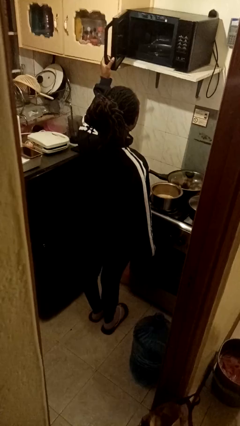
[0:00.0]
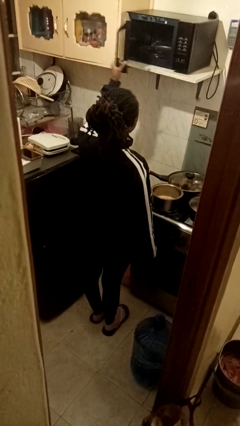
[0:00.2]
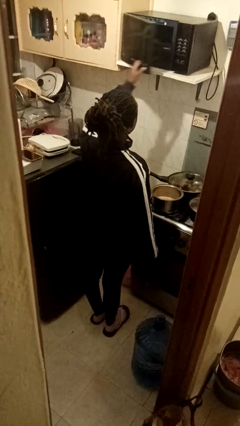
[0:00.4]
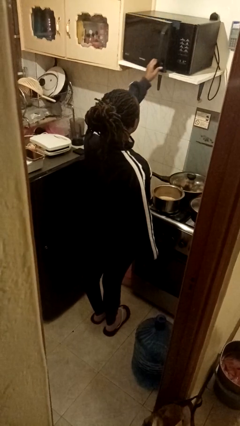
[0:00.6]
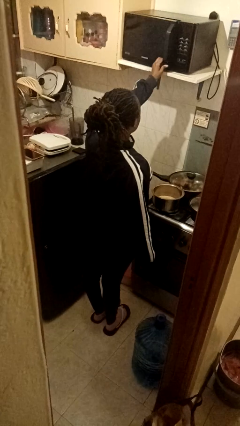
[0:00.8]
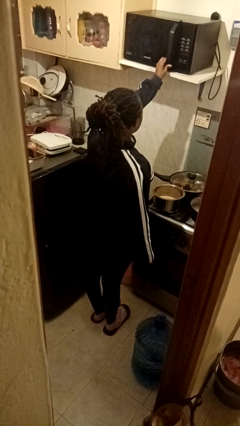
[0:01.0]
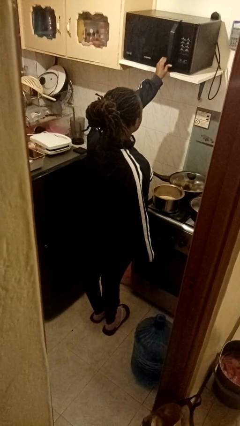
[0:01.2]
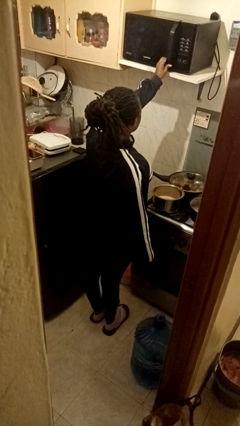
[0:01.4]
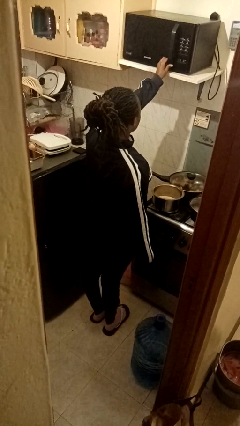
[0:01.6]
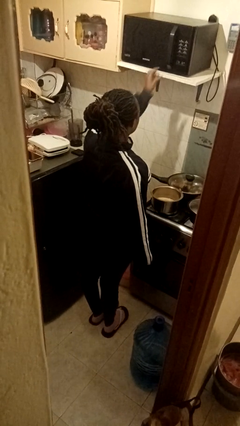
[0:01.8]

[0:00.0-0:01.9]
person closes microwave

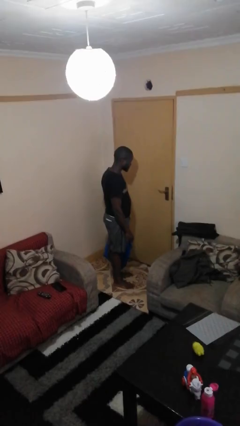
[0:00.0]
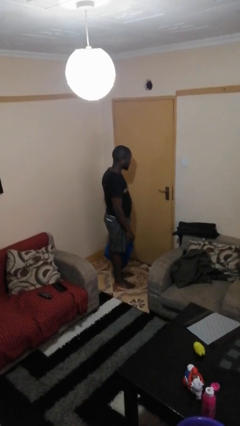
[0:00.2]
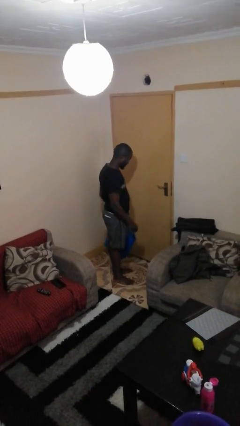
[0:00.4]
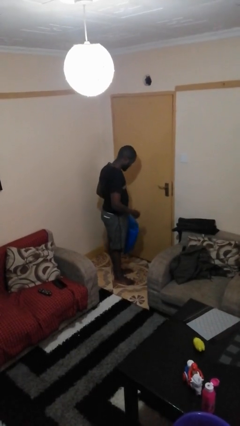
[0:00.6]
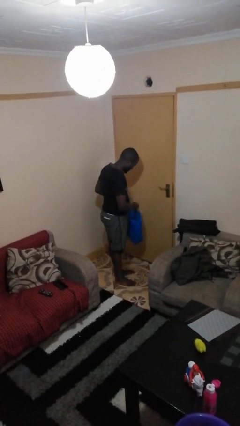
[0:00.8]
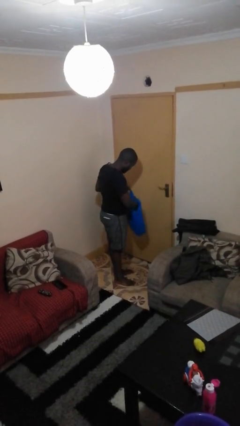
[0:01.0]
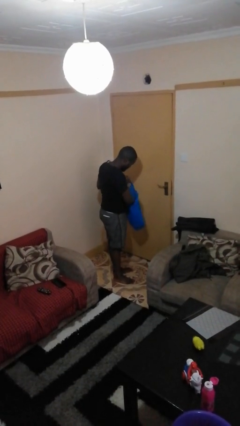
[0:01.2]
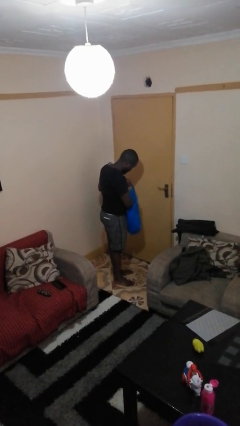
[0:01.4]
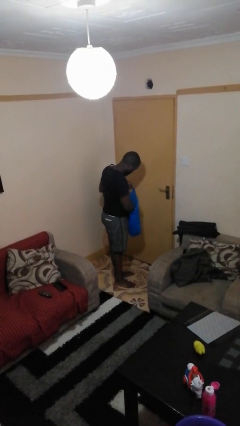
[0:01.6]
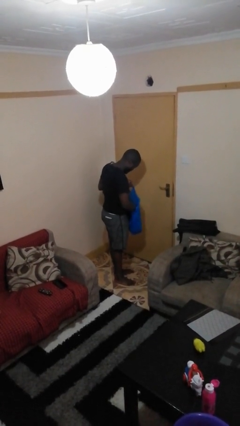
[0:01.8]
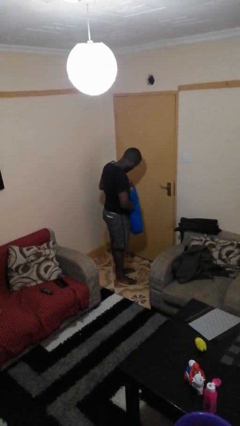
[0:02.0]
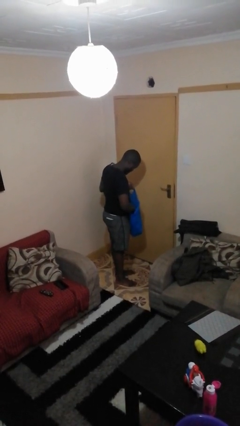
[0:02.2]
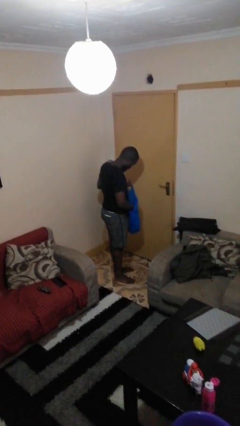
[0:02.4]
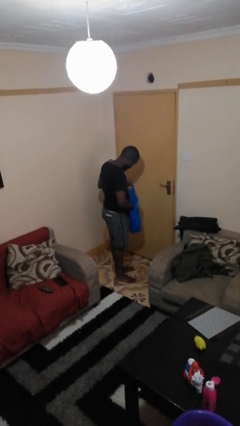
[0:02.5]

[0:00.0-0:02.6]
person searches in bag

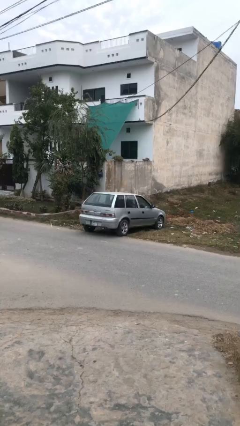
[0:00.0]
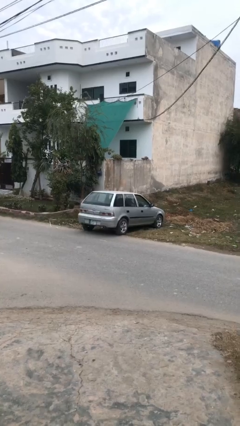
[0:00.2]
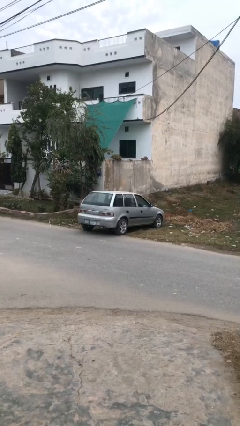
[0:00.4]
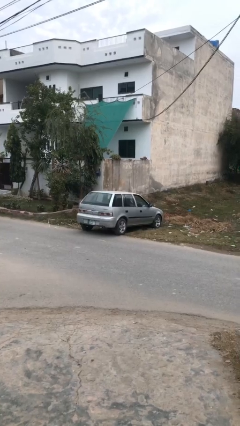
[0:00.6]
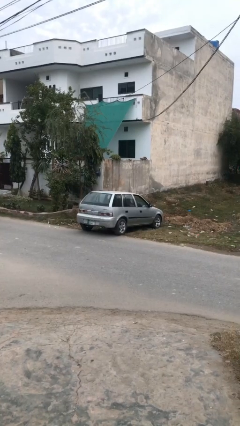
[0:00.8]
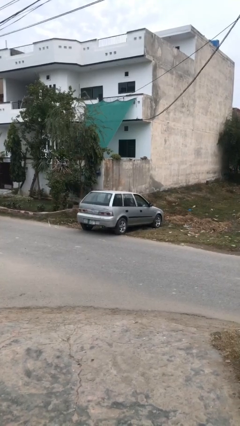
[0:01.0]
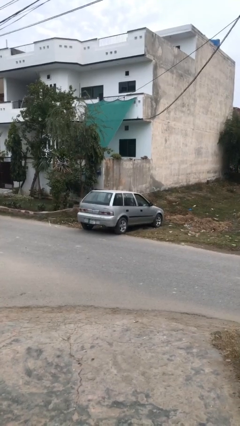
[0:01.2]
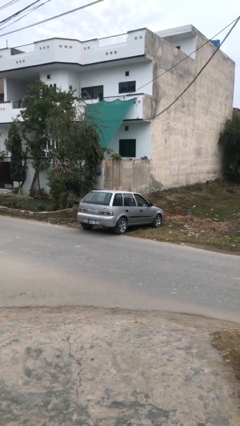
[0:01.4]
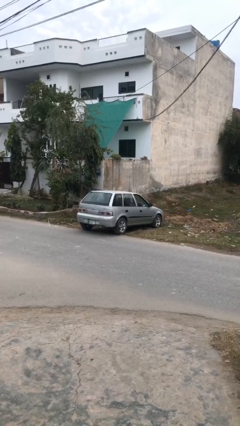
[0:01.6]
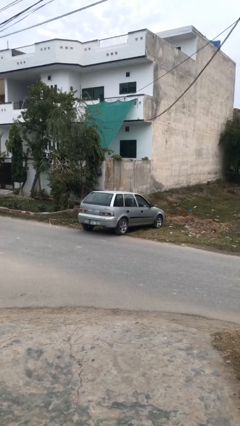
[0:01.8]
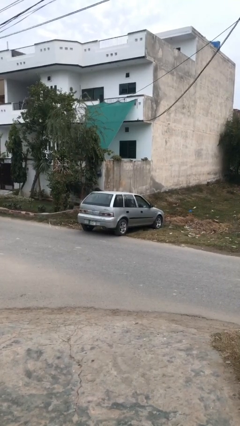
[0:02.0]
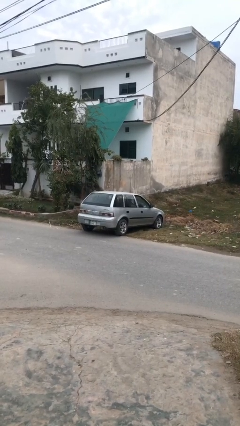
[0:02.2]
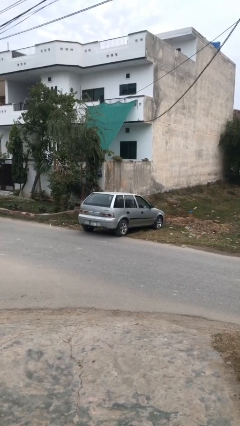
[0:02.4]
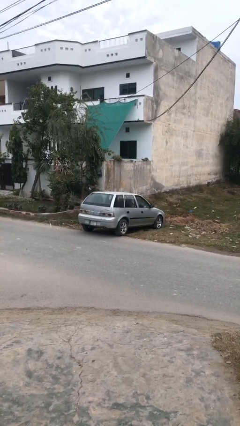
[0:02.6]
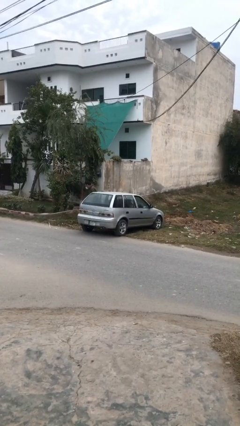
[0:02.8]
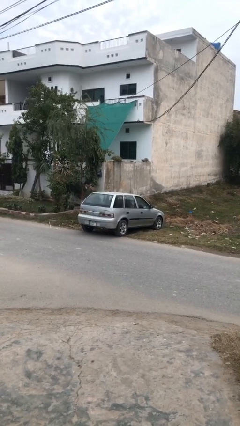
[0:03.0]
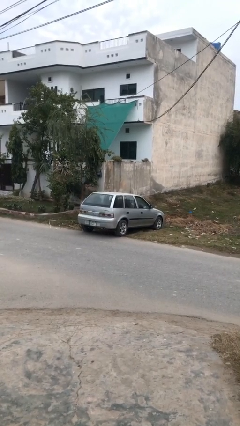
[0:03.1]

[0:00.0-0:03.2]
car drops off person

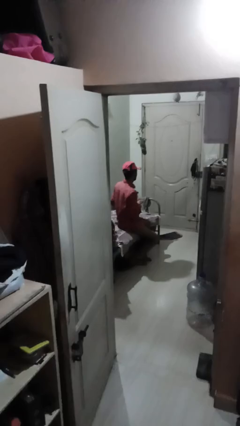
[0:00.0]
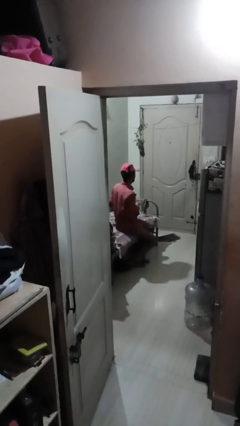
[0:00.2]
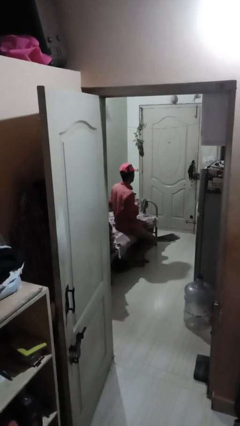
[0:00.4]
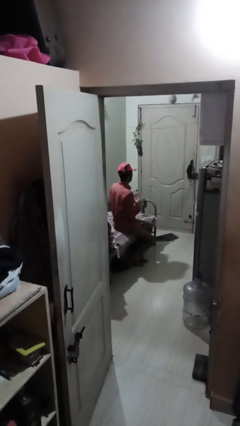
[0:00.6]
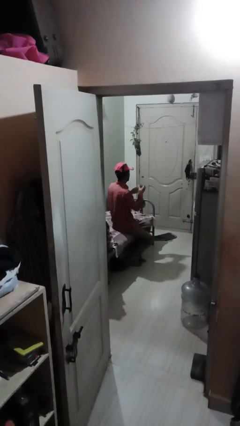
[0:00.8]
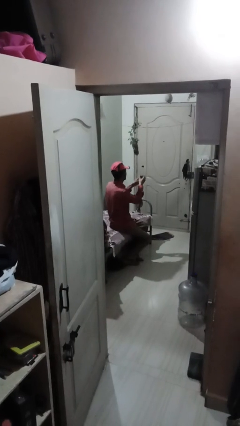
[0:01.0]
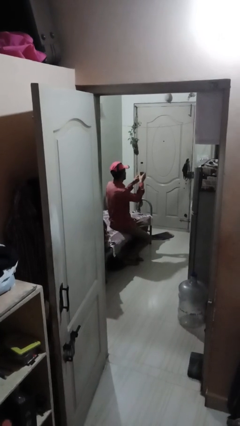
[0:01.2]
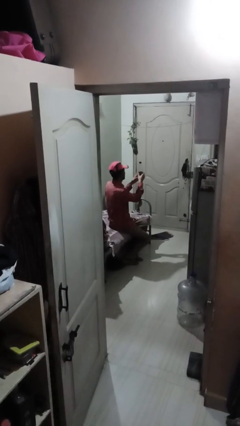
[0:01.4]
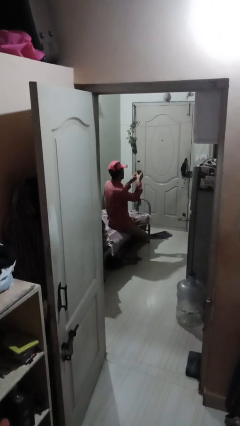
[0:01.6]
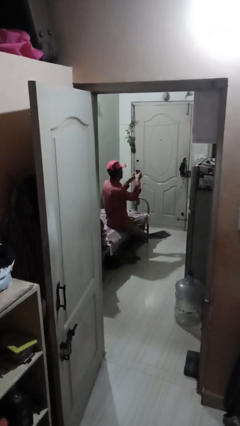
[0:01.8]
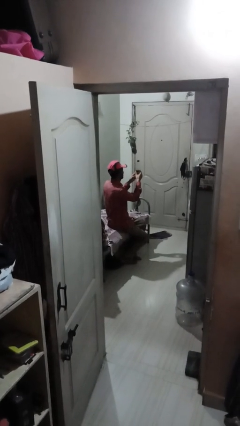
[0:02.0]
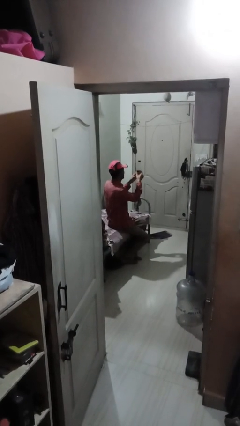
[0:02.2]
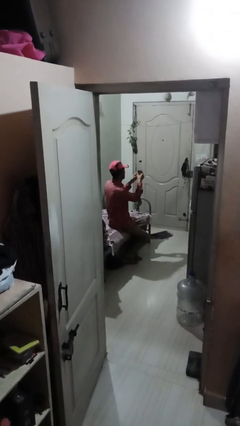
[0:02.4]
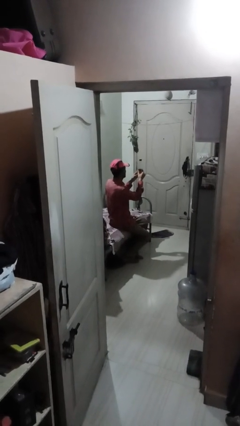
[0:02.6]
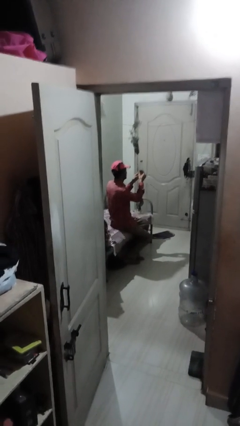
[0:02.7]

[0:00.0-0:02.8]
person squeezes object

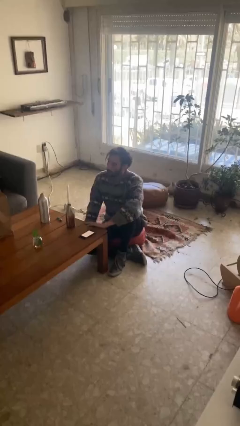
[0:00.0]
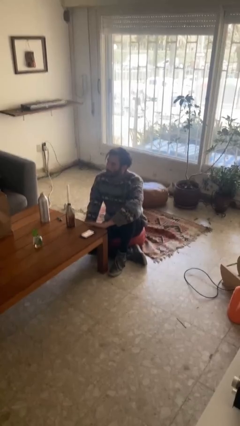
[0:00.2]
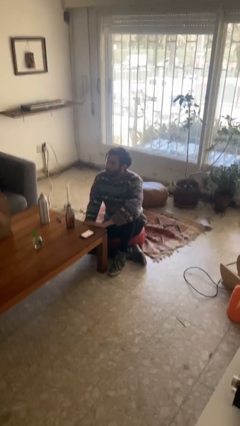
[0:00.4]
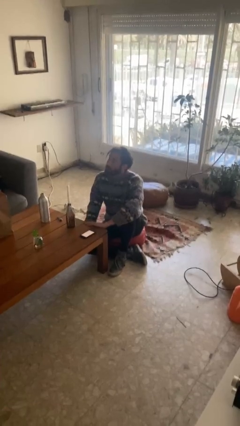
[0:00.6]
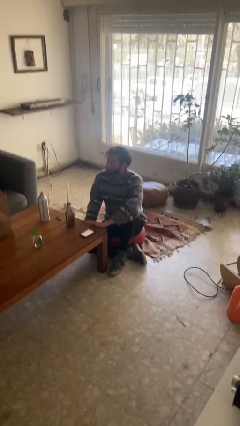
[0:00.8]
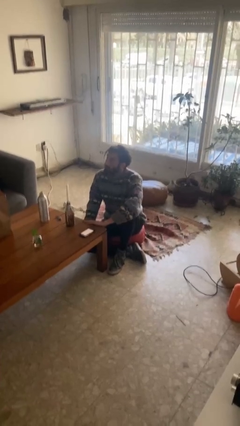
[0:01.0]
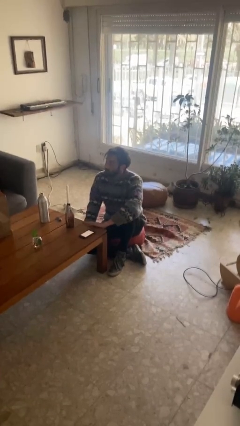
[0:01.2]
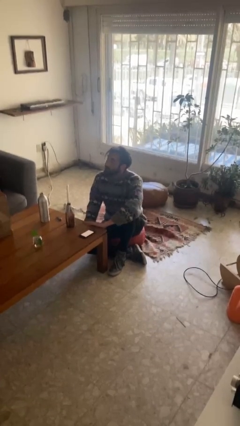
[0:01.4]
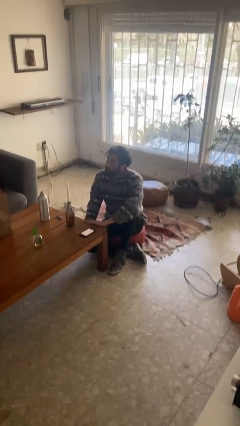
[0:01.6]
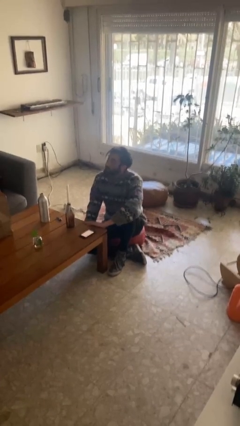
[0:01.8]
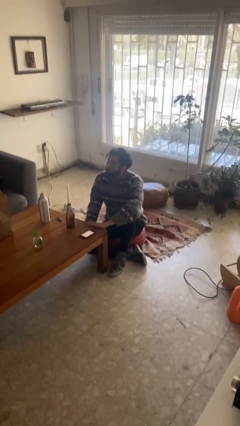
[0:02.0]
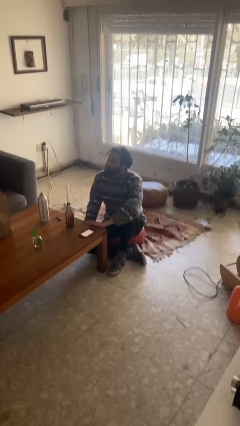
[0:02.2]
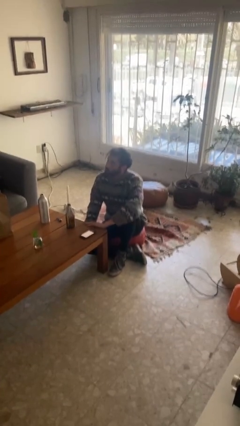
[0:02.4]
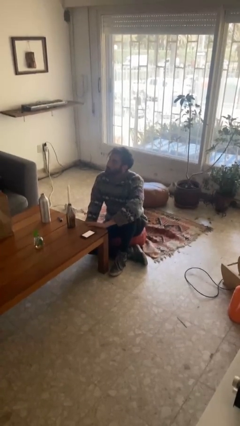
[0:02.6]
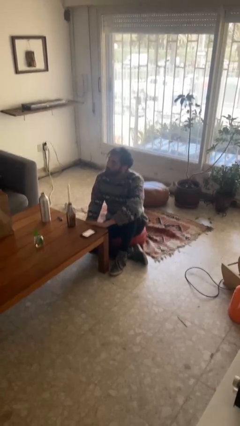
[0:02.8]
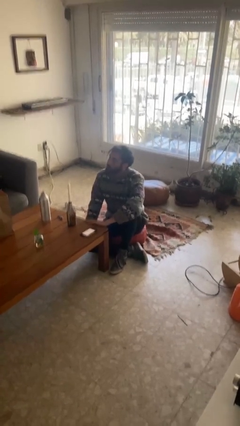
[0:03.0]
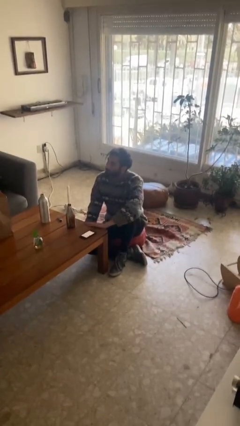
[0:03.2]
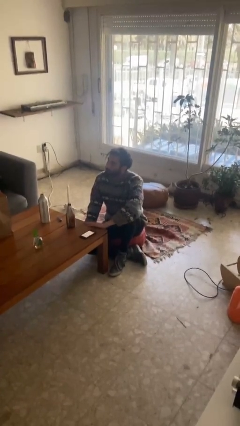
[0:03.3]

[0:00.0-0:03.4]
person nods head

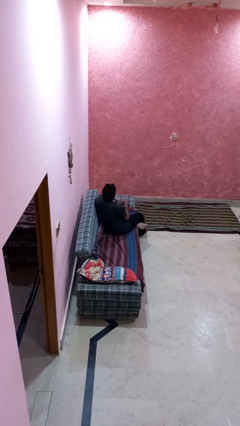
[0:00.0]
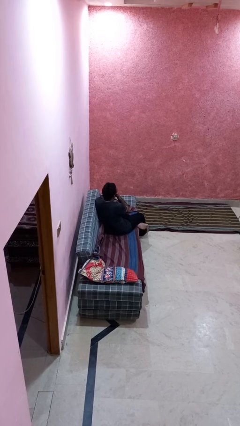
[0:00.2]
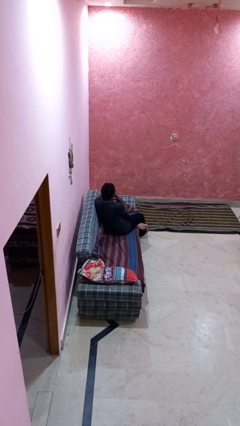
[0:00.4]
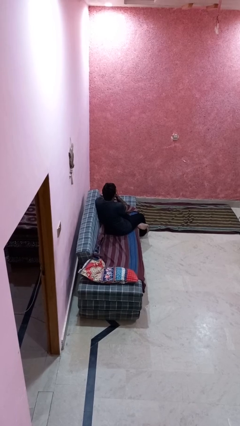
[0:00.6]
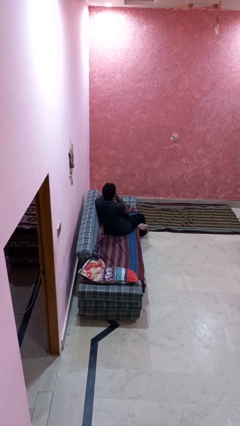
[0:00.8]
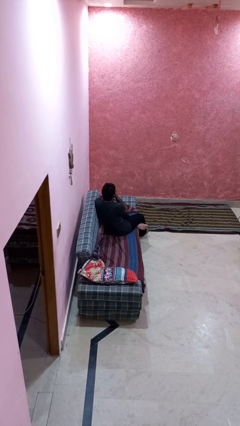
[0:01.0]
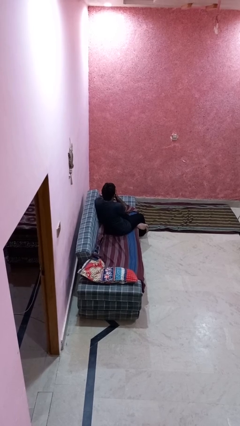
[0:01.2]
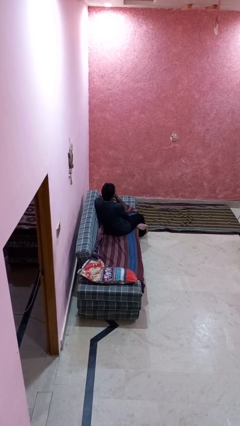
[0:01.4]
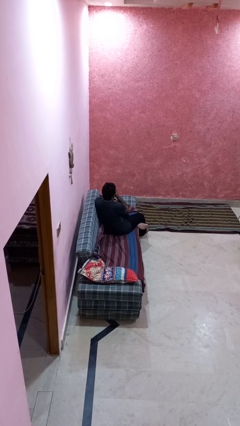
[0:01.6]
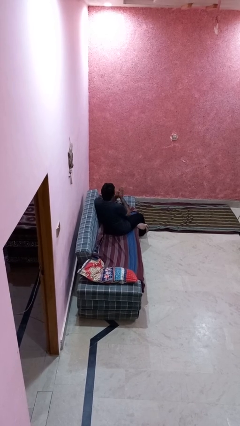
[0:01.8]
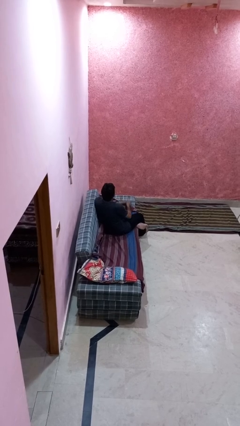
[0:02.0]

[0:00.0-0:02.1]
person covers face with hands

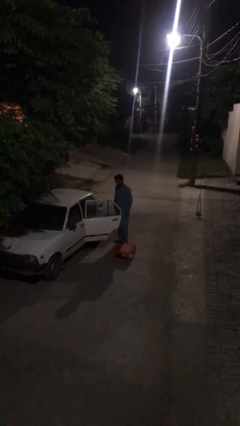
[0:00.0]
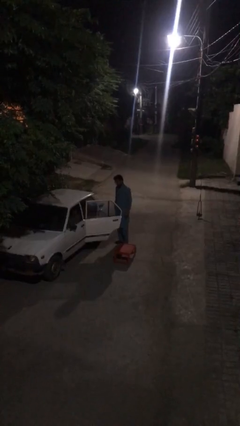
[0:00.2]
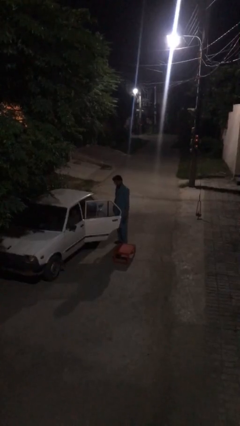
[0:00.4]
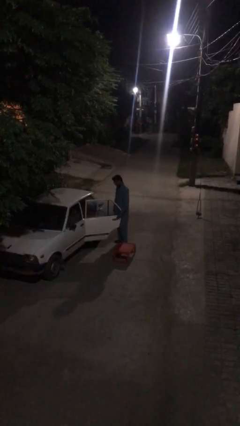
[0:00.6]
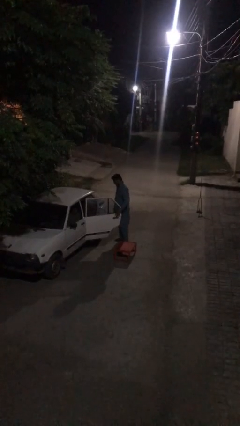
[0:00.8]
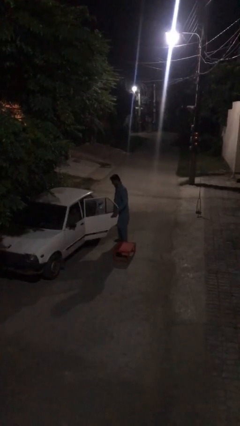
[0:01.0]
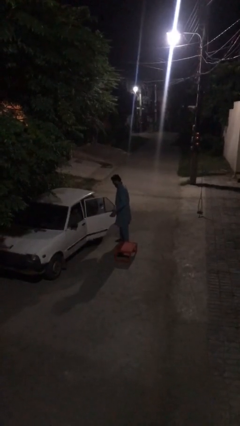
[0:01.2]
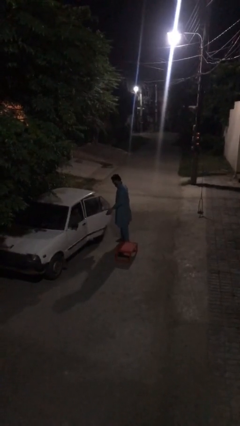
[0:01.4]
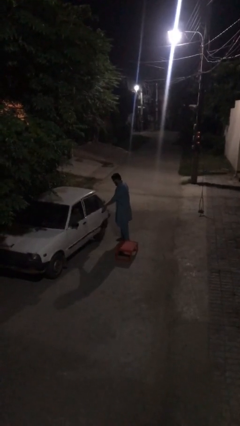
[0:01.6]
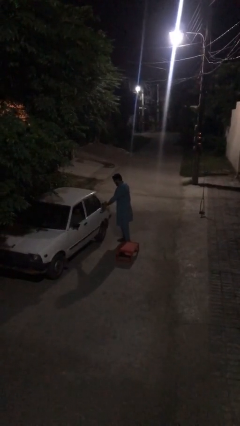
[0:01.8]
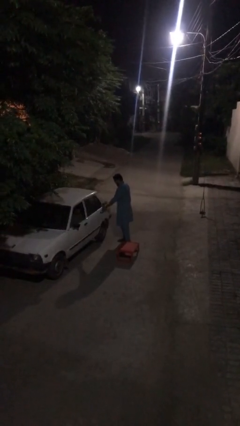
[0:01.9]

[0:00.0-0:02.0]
person closes car door
